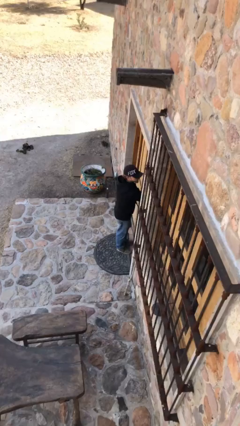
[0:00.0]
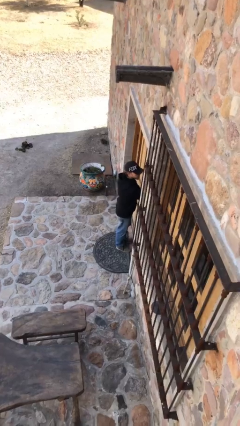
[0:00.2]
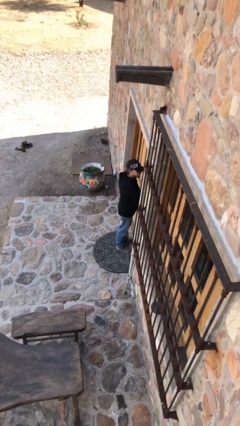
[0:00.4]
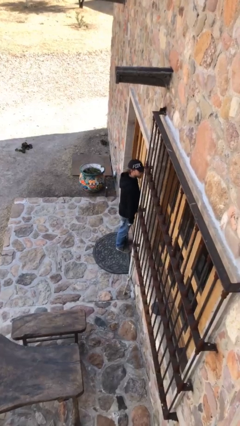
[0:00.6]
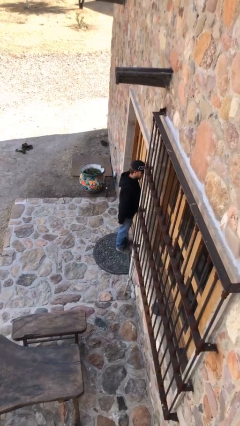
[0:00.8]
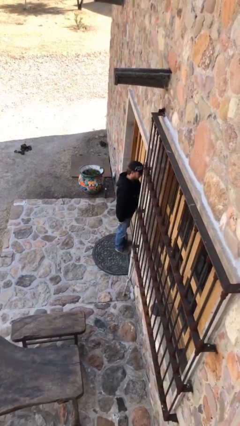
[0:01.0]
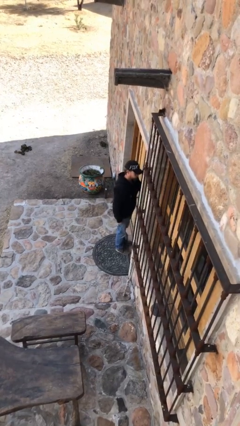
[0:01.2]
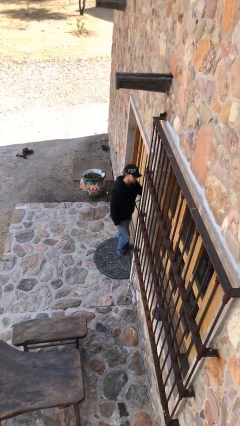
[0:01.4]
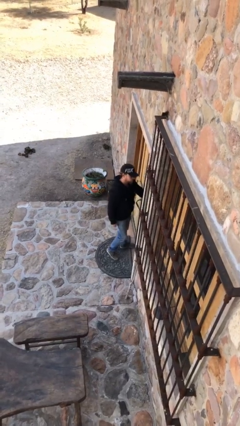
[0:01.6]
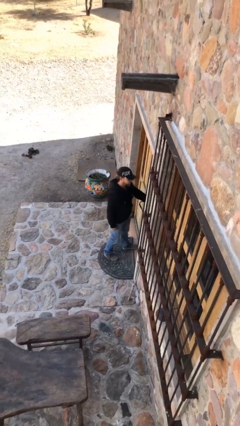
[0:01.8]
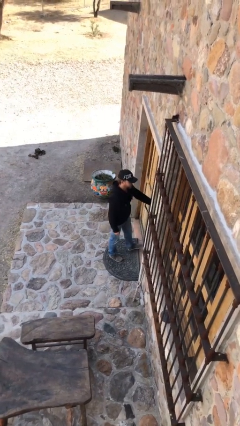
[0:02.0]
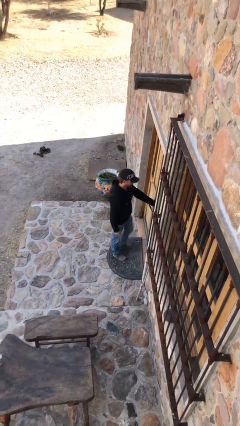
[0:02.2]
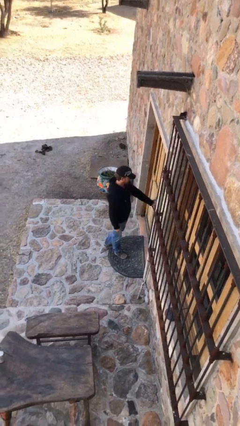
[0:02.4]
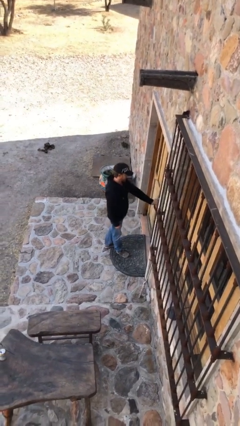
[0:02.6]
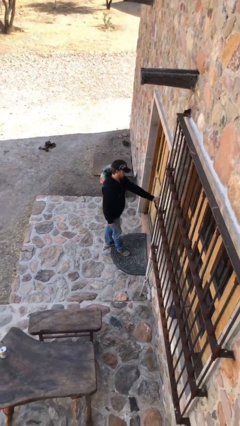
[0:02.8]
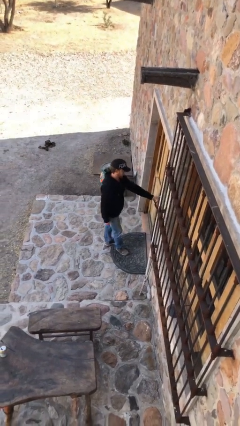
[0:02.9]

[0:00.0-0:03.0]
person closes facility door

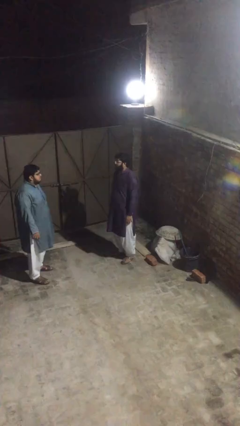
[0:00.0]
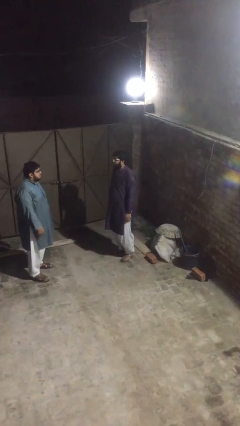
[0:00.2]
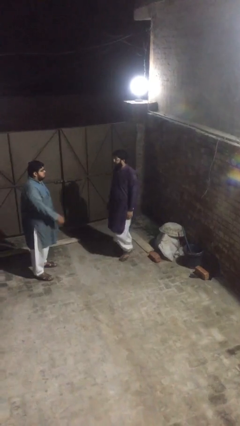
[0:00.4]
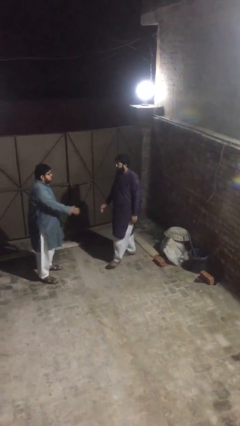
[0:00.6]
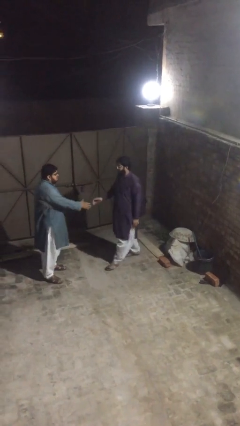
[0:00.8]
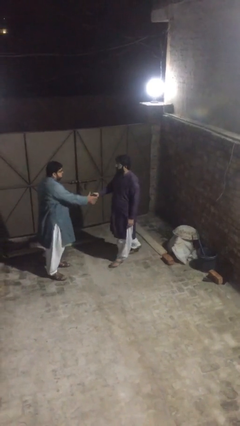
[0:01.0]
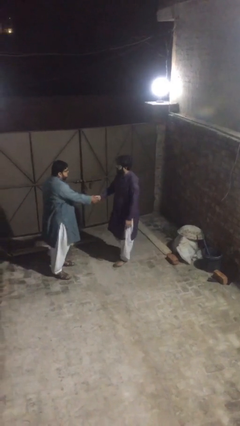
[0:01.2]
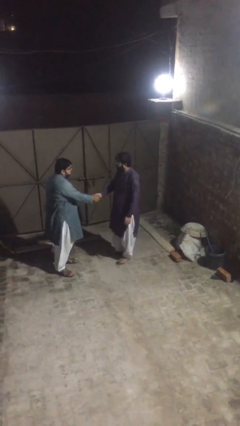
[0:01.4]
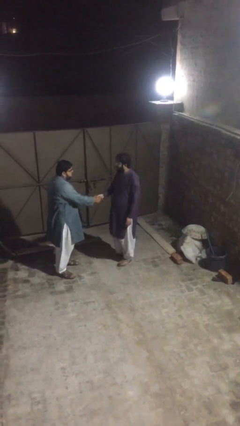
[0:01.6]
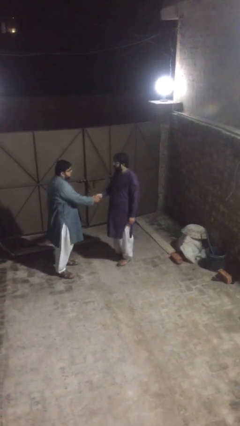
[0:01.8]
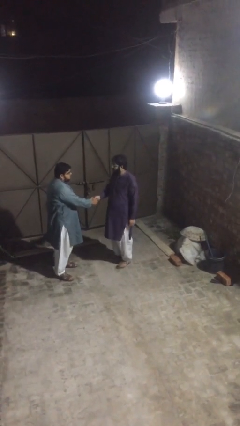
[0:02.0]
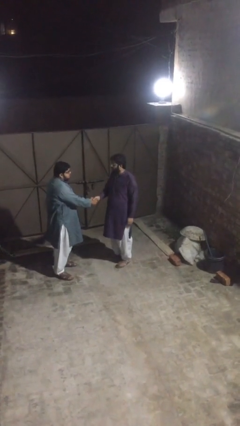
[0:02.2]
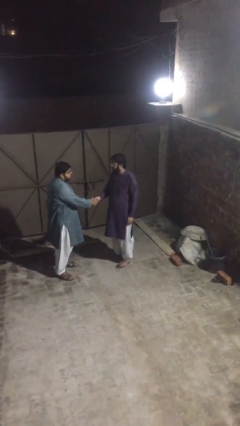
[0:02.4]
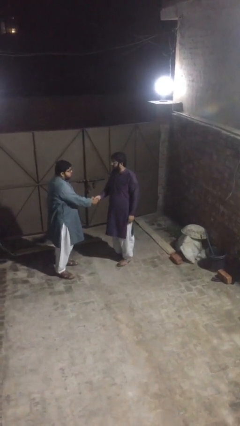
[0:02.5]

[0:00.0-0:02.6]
person shakes hand

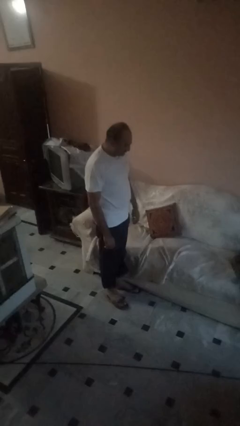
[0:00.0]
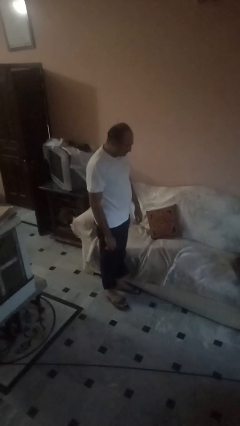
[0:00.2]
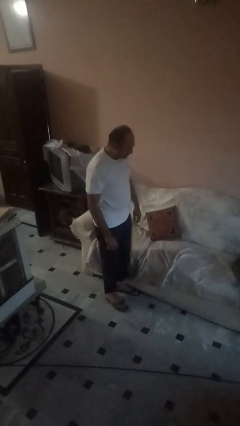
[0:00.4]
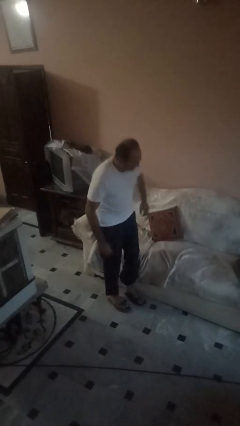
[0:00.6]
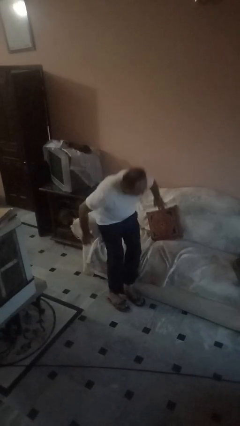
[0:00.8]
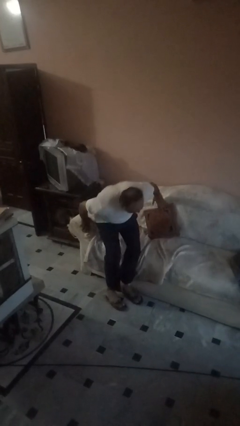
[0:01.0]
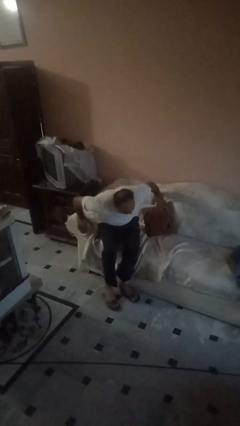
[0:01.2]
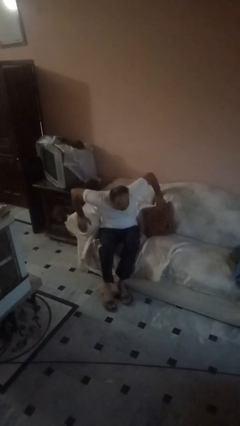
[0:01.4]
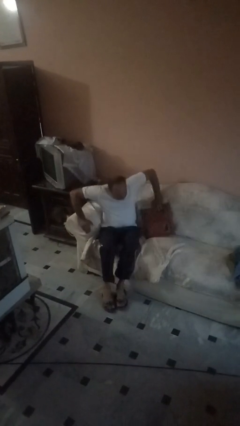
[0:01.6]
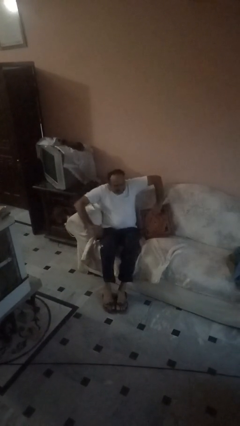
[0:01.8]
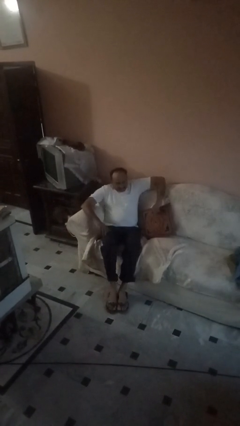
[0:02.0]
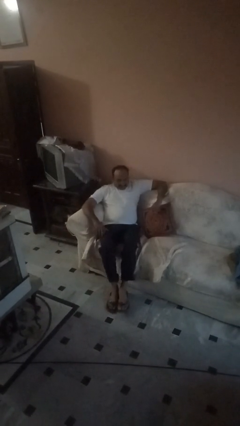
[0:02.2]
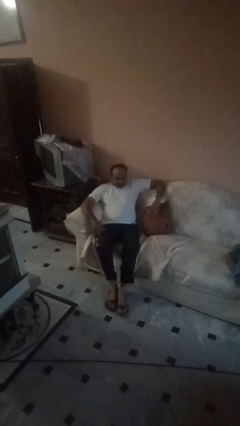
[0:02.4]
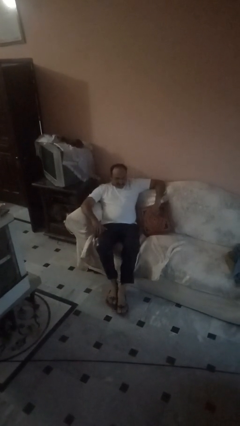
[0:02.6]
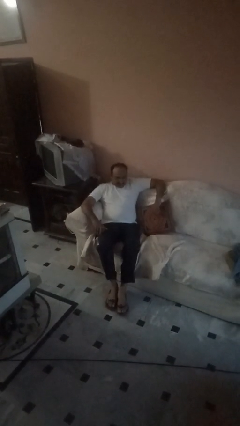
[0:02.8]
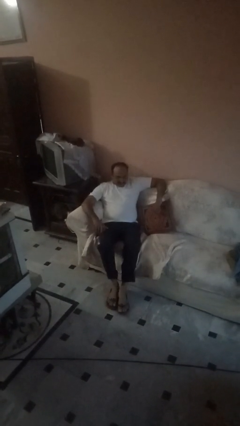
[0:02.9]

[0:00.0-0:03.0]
person lies down on couch

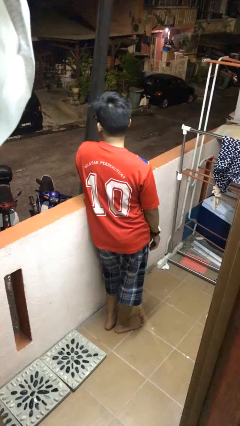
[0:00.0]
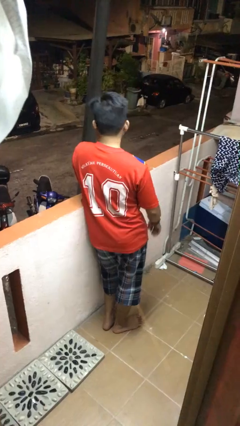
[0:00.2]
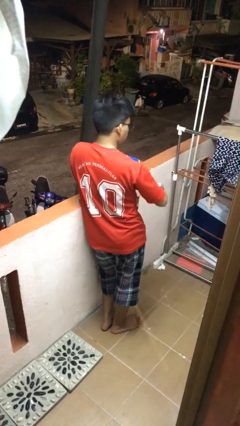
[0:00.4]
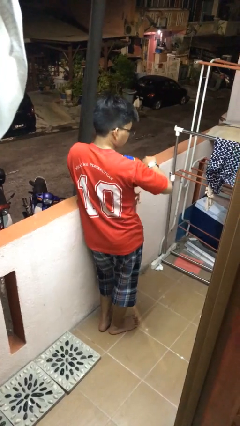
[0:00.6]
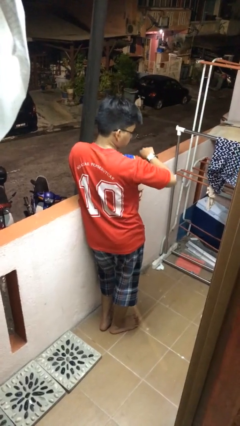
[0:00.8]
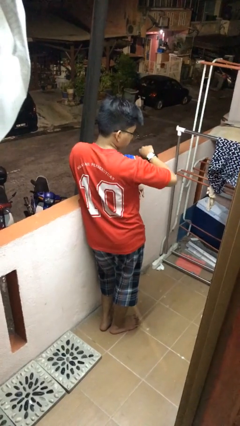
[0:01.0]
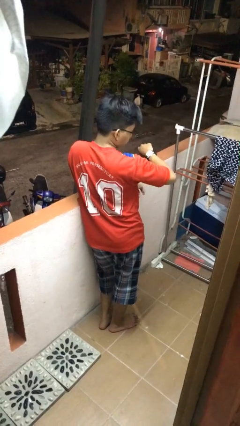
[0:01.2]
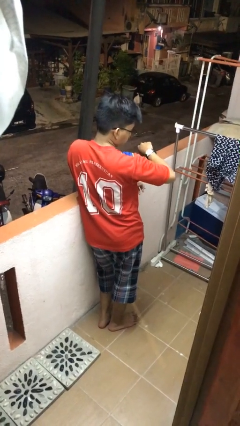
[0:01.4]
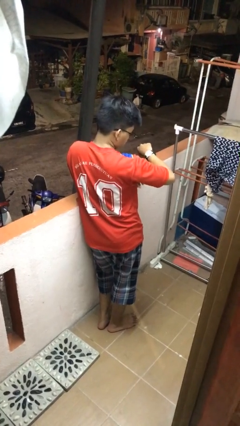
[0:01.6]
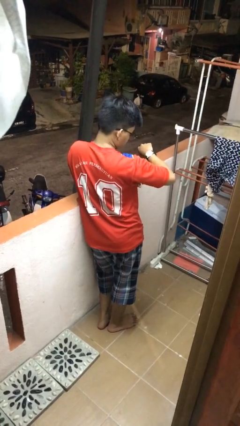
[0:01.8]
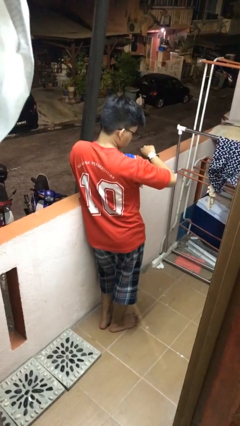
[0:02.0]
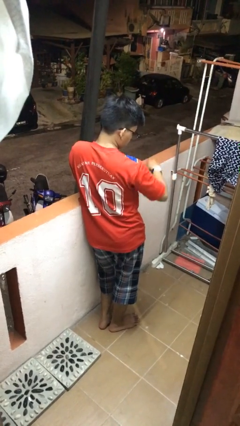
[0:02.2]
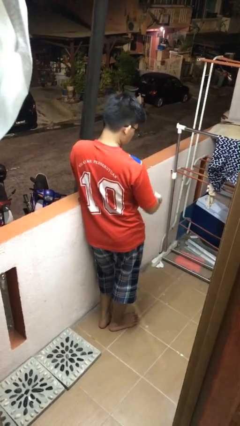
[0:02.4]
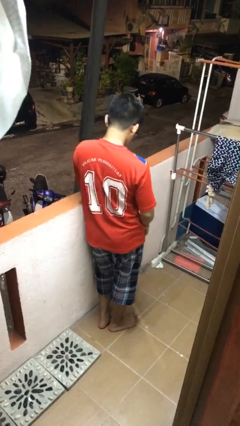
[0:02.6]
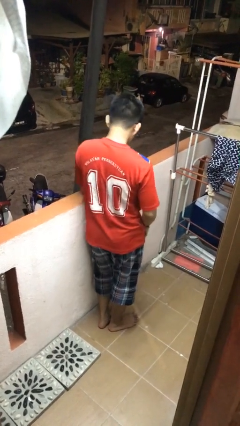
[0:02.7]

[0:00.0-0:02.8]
person looks at wristwatch

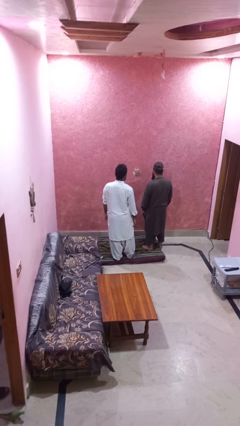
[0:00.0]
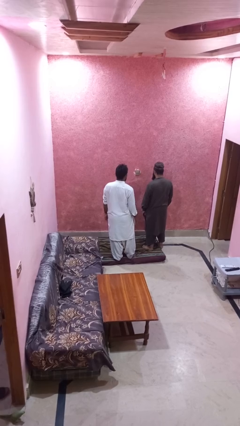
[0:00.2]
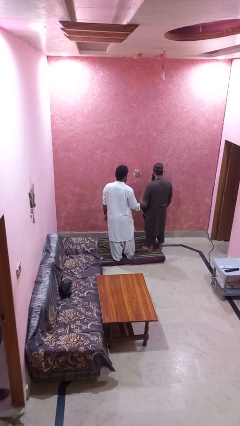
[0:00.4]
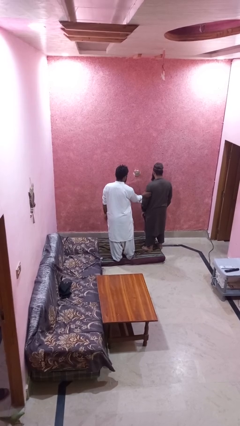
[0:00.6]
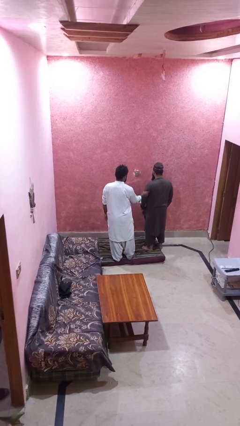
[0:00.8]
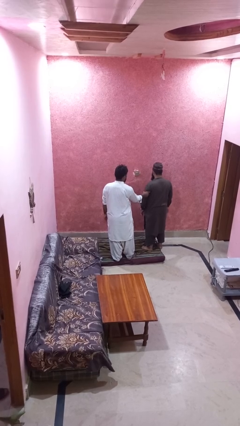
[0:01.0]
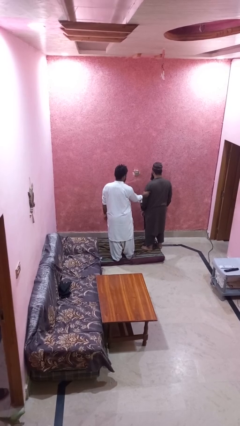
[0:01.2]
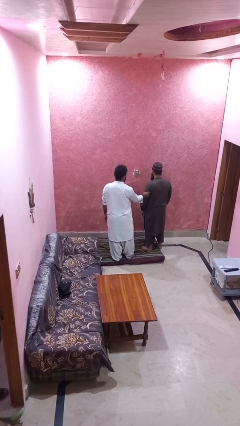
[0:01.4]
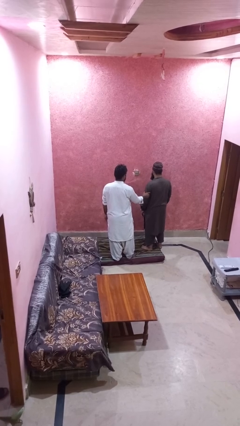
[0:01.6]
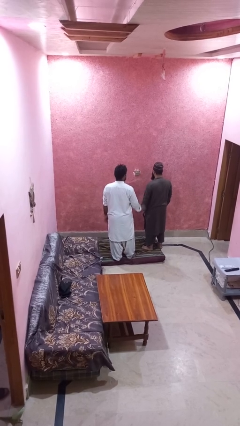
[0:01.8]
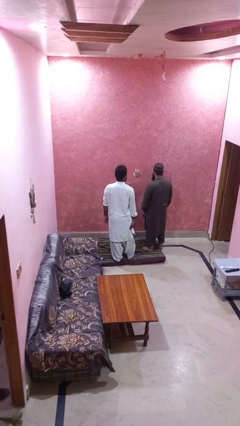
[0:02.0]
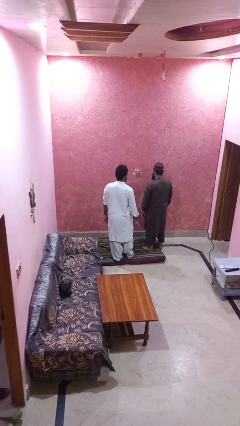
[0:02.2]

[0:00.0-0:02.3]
person grabs person by bicep

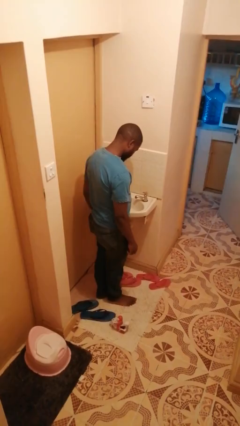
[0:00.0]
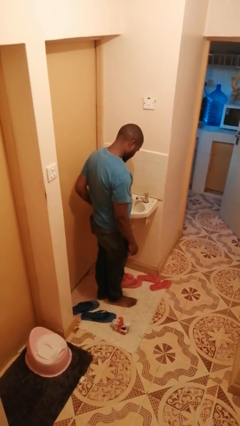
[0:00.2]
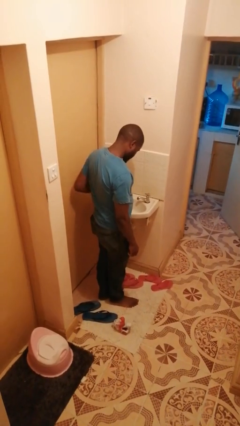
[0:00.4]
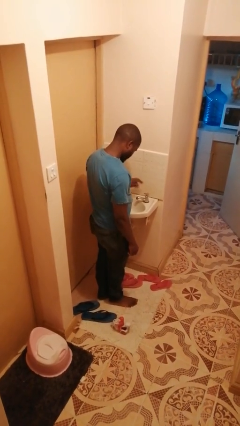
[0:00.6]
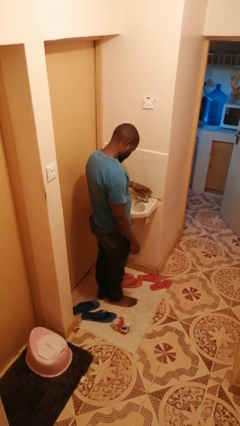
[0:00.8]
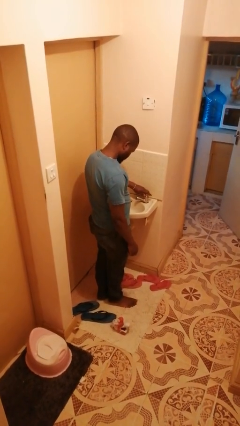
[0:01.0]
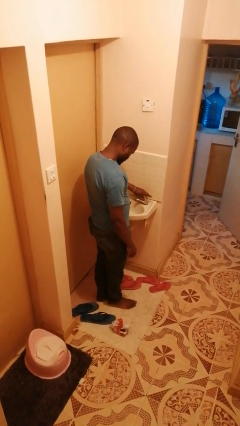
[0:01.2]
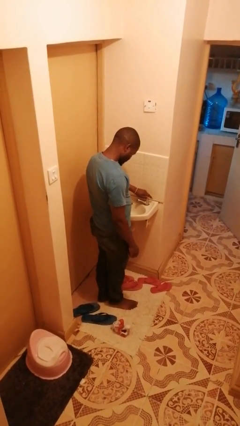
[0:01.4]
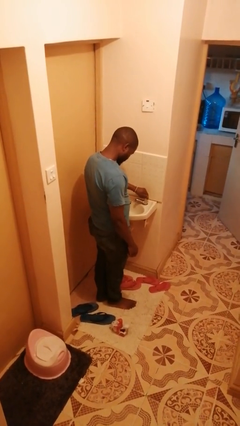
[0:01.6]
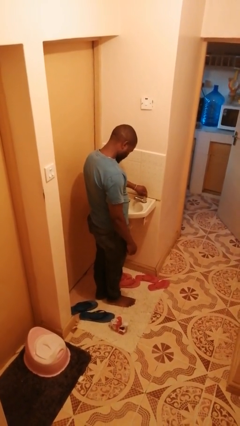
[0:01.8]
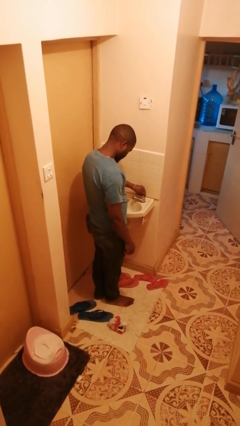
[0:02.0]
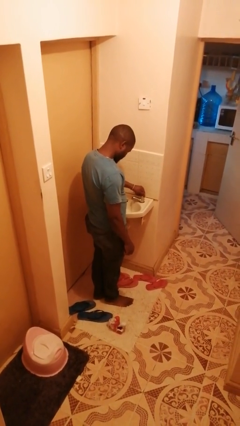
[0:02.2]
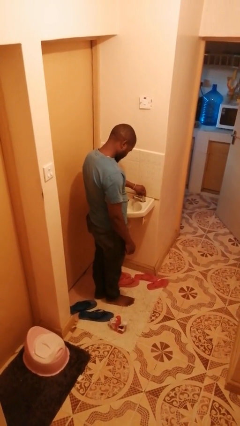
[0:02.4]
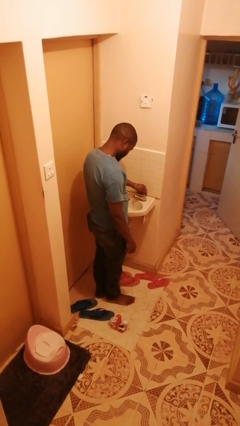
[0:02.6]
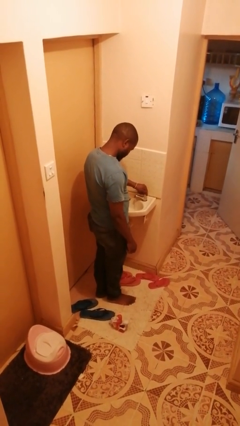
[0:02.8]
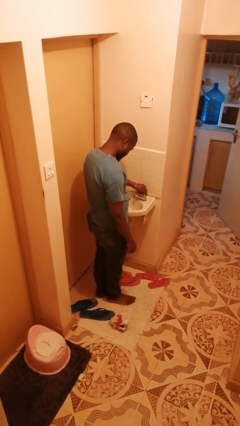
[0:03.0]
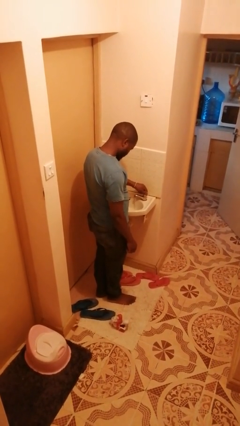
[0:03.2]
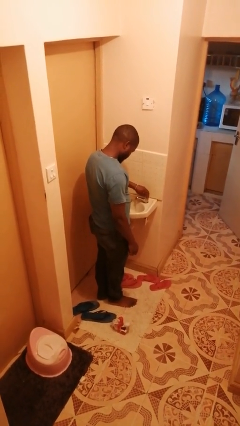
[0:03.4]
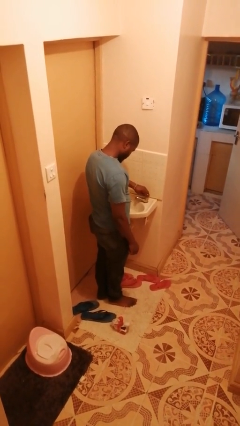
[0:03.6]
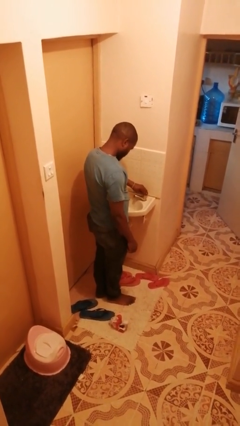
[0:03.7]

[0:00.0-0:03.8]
person turns on faucet

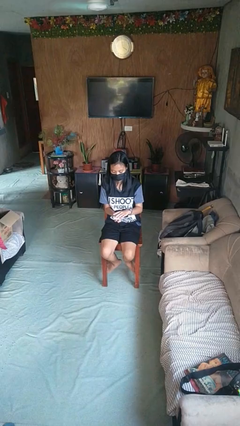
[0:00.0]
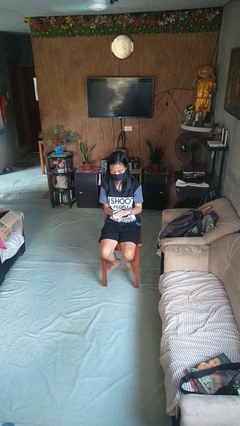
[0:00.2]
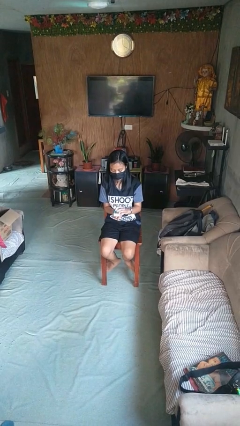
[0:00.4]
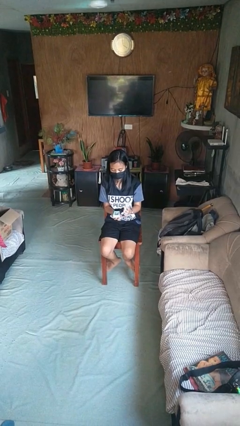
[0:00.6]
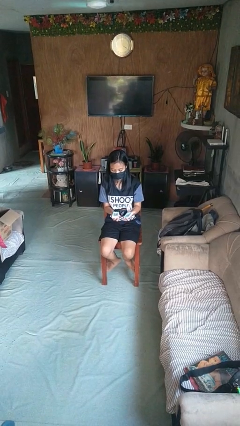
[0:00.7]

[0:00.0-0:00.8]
person opens jewelry box
